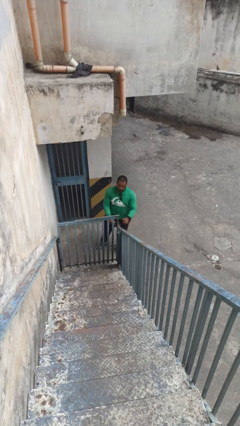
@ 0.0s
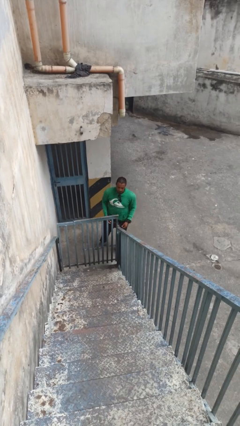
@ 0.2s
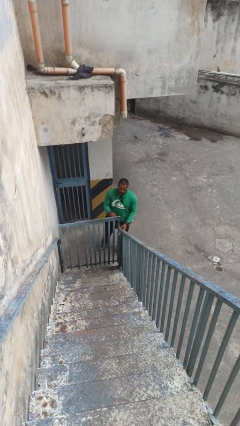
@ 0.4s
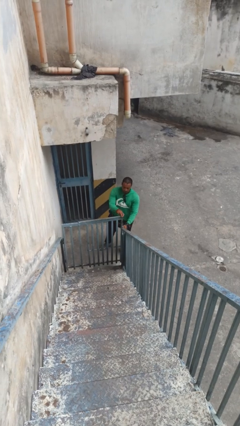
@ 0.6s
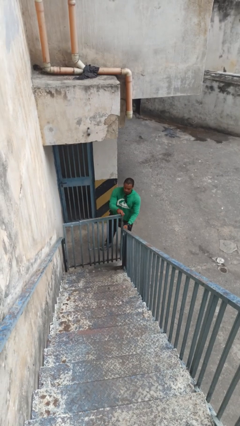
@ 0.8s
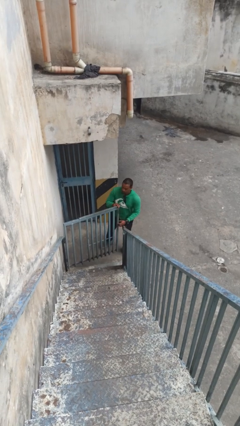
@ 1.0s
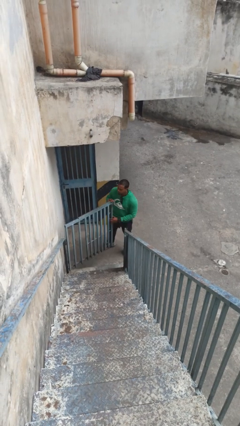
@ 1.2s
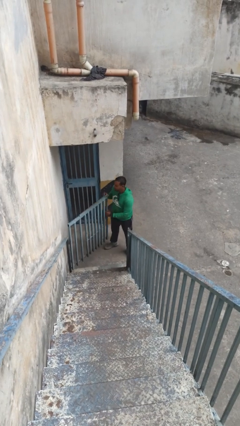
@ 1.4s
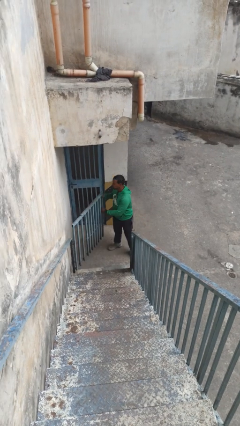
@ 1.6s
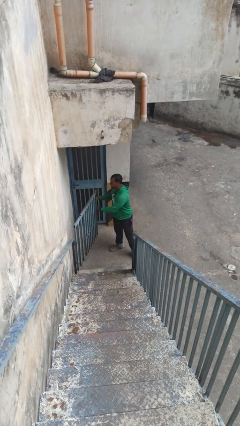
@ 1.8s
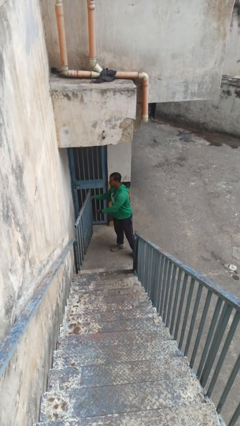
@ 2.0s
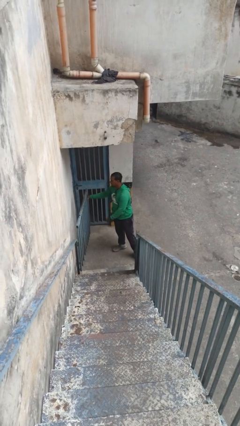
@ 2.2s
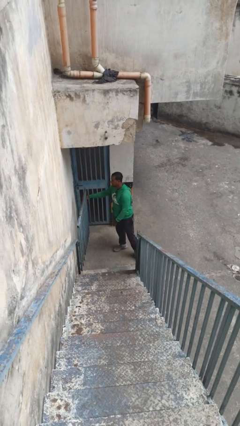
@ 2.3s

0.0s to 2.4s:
person opens facility door

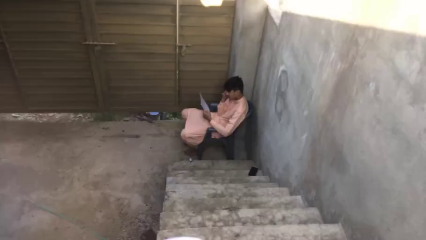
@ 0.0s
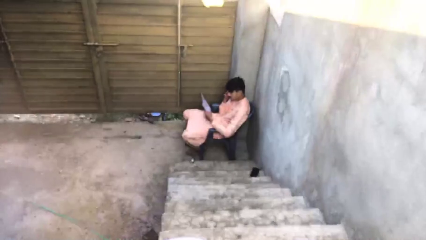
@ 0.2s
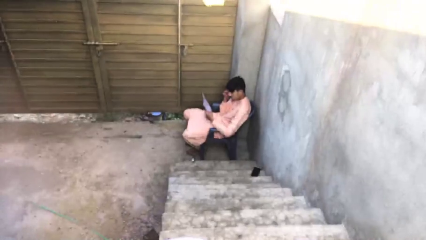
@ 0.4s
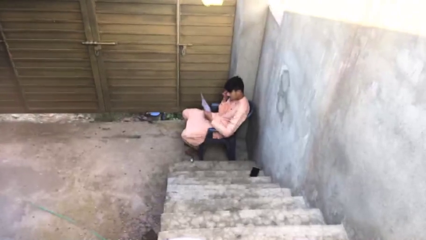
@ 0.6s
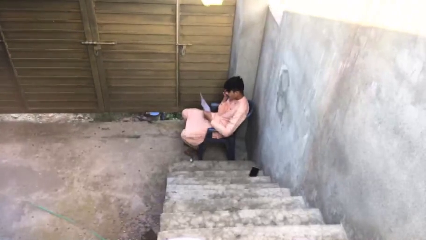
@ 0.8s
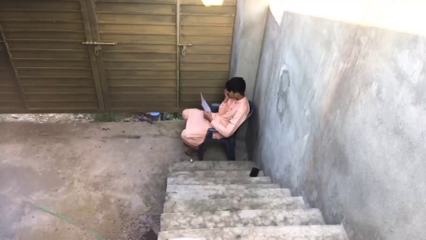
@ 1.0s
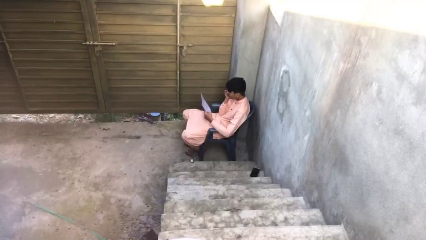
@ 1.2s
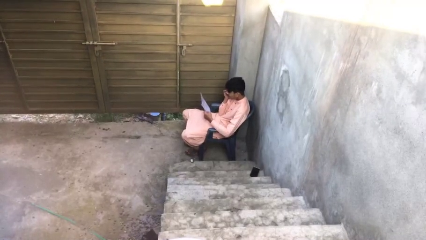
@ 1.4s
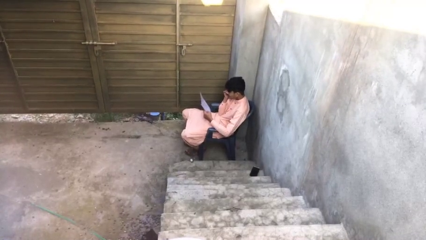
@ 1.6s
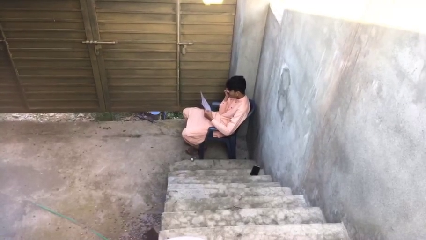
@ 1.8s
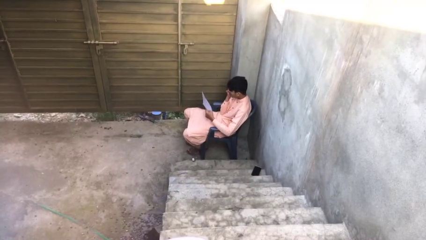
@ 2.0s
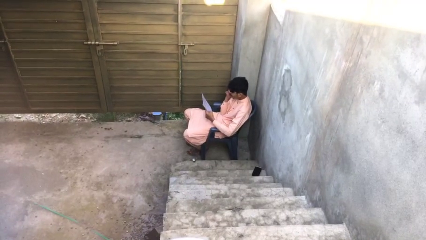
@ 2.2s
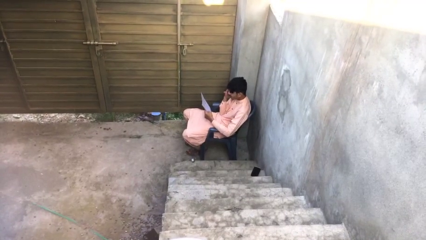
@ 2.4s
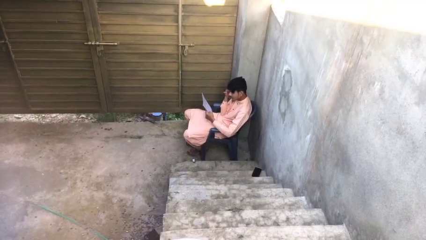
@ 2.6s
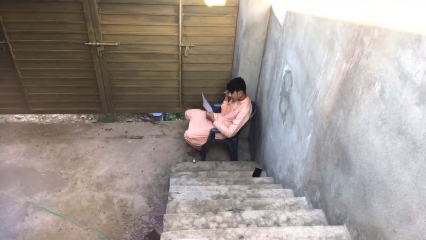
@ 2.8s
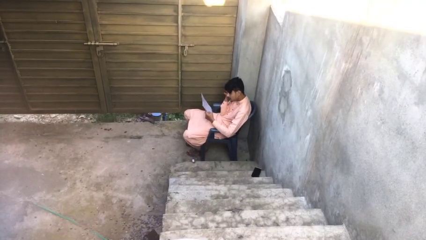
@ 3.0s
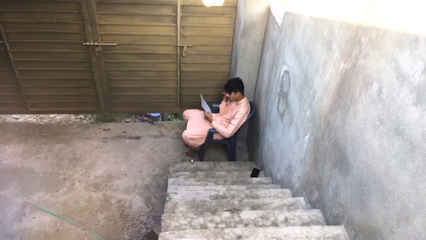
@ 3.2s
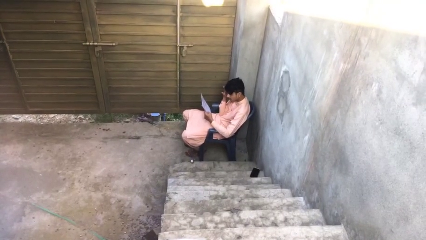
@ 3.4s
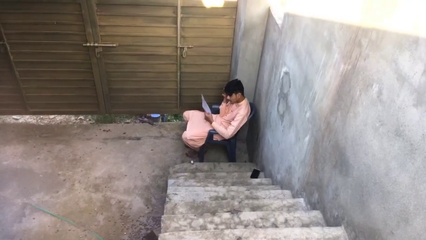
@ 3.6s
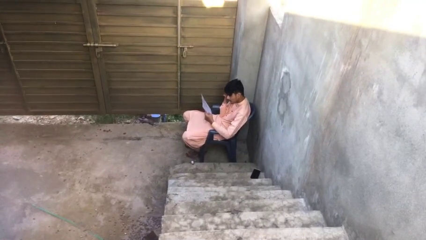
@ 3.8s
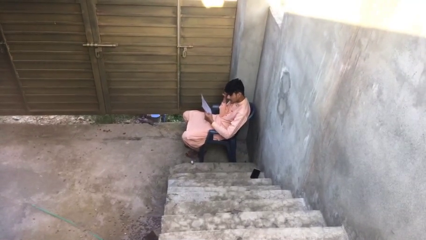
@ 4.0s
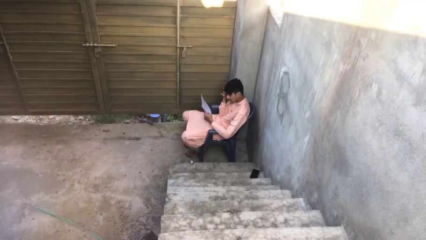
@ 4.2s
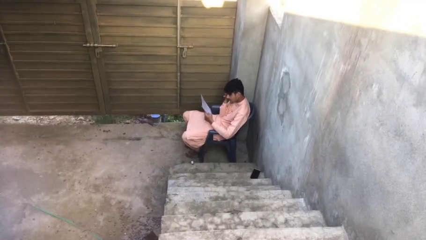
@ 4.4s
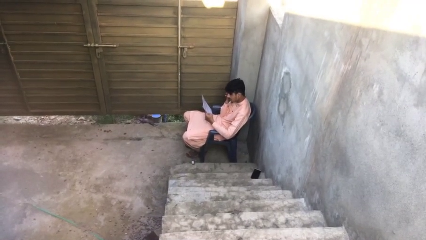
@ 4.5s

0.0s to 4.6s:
person reads document

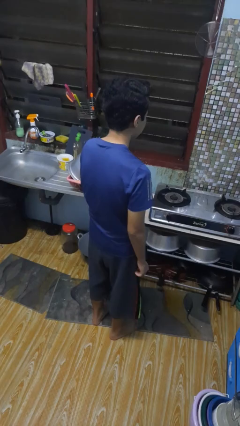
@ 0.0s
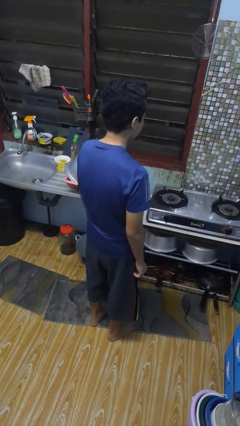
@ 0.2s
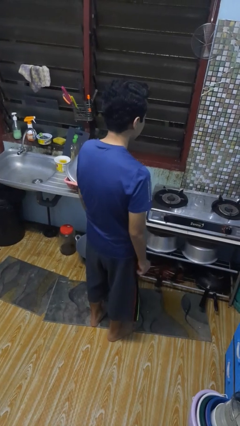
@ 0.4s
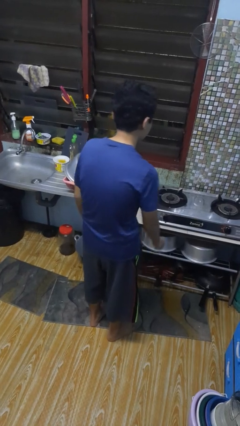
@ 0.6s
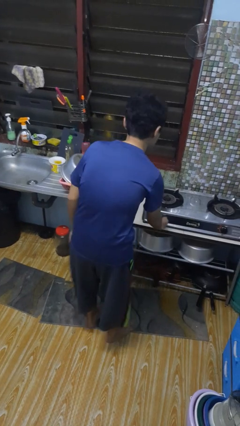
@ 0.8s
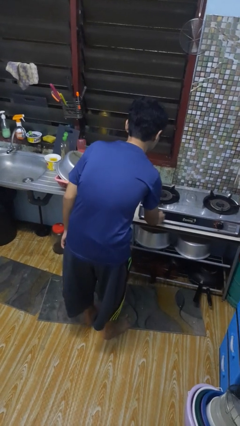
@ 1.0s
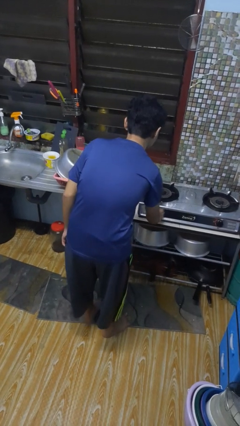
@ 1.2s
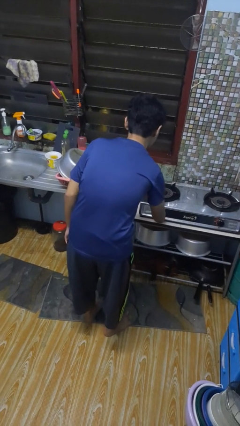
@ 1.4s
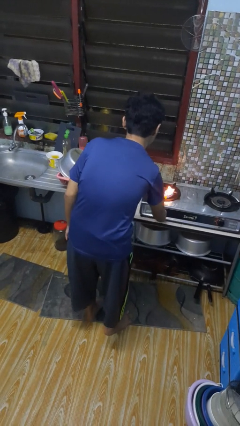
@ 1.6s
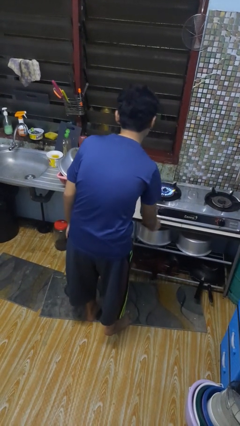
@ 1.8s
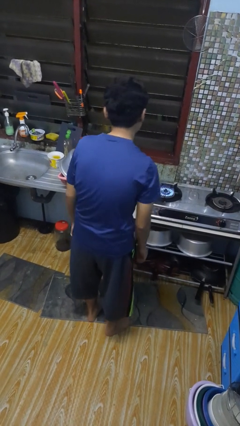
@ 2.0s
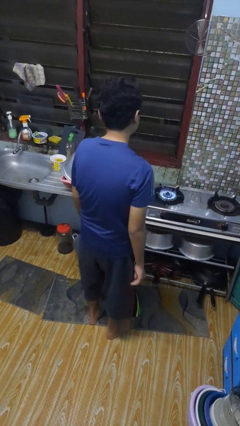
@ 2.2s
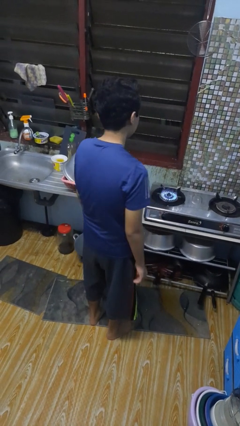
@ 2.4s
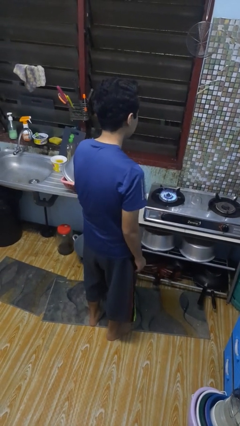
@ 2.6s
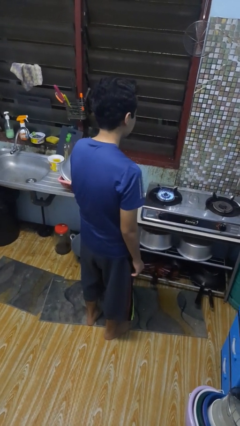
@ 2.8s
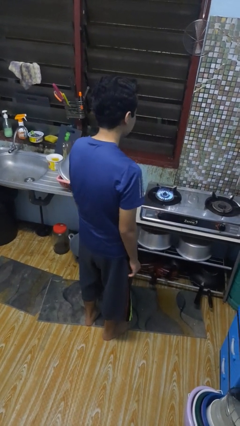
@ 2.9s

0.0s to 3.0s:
person turns on stovetop

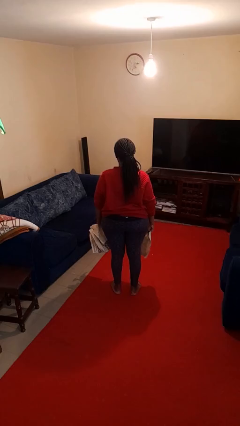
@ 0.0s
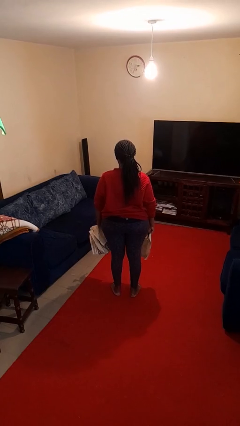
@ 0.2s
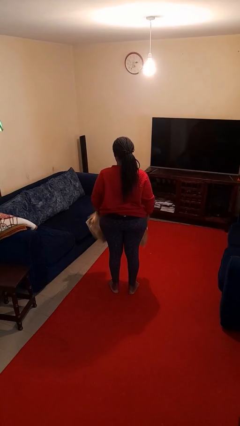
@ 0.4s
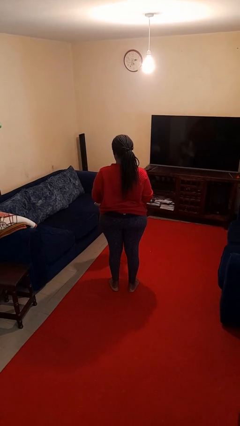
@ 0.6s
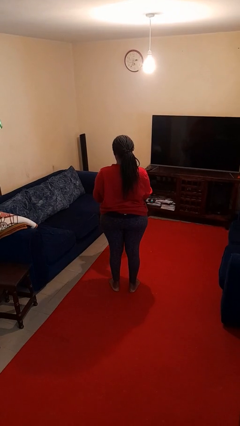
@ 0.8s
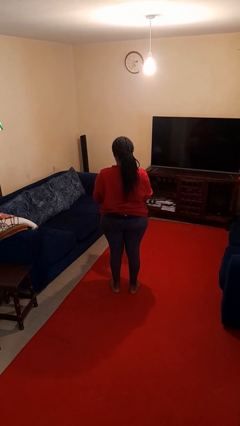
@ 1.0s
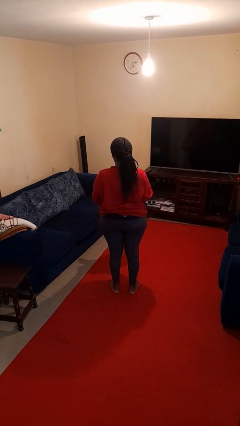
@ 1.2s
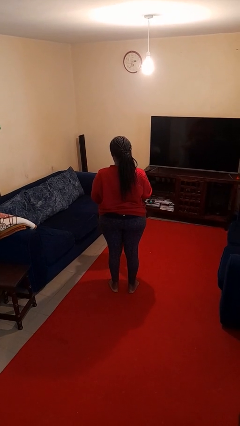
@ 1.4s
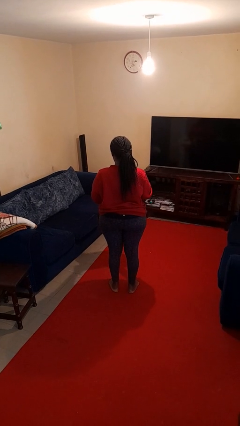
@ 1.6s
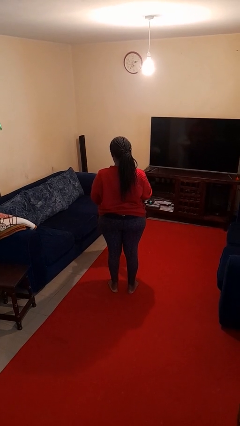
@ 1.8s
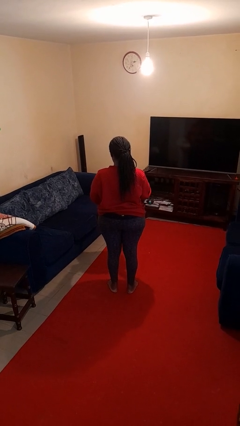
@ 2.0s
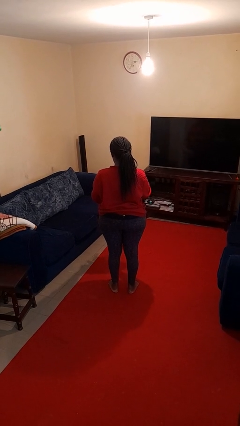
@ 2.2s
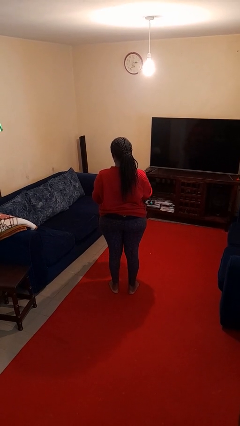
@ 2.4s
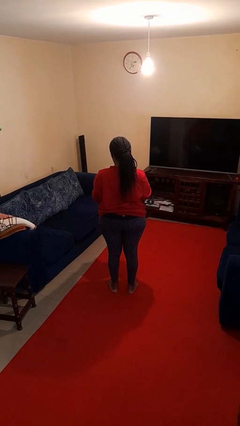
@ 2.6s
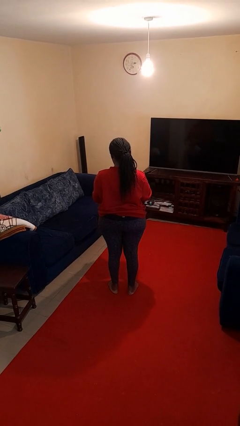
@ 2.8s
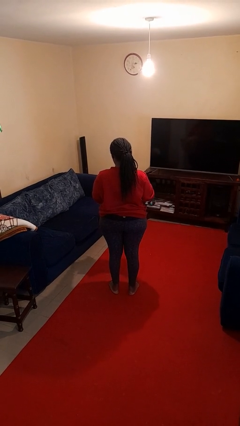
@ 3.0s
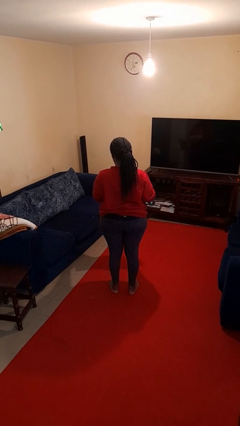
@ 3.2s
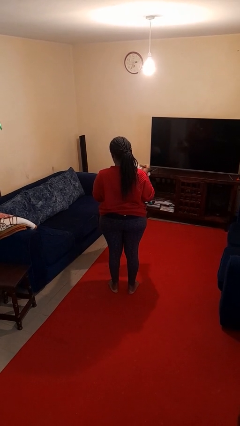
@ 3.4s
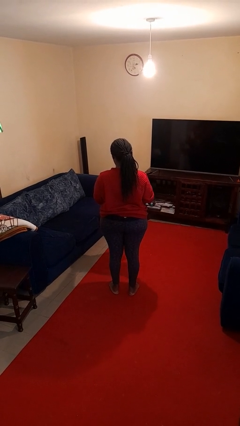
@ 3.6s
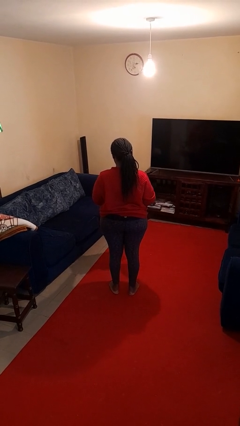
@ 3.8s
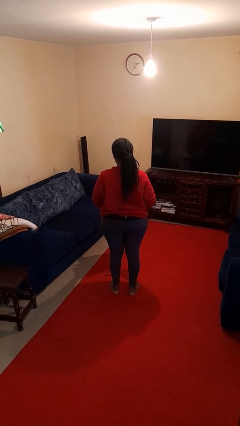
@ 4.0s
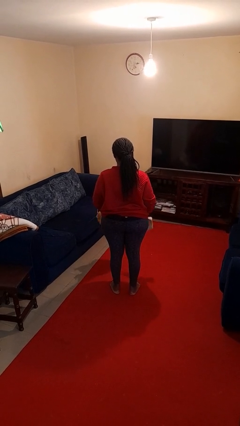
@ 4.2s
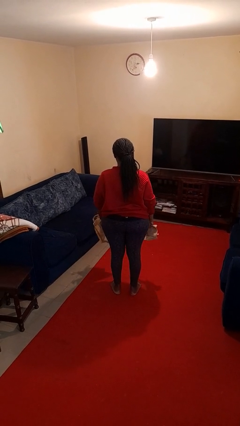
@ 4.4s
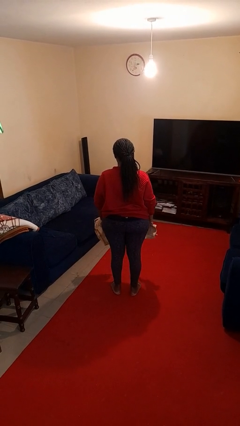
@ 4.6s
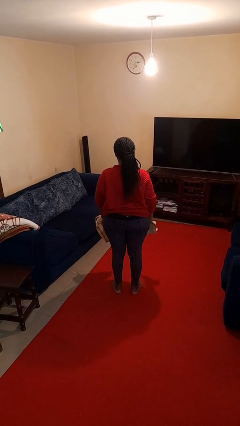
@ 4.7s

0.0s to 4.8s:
person tears paper

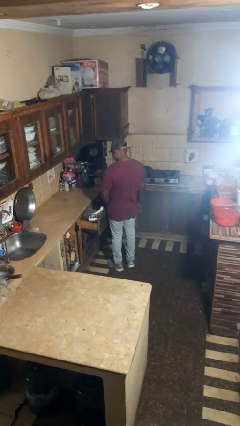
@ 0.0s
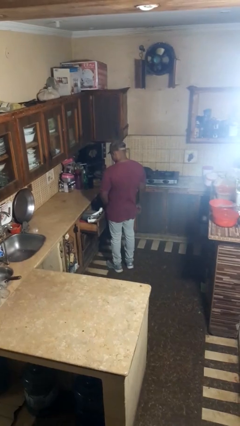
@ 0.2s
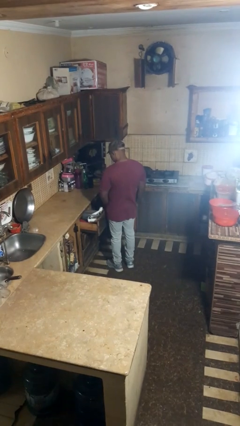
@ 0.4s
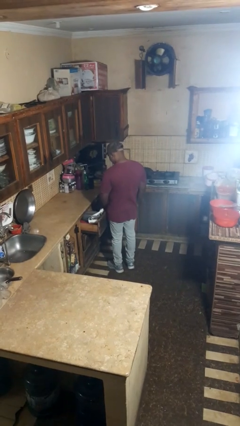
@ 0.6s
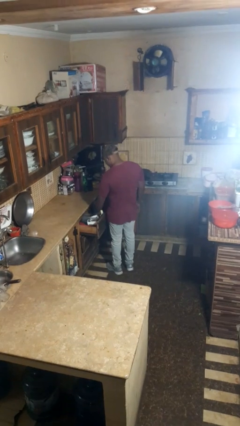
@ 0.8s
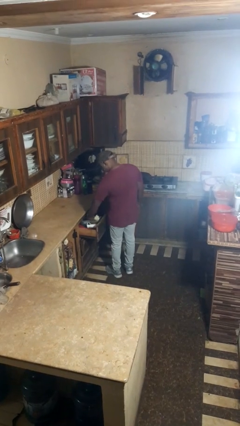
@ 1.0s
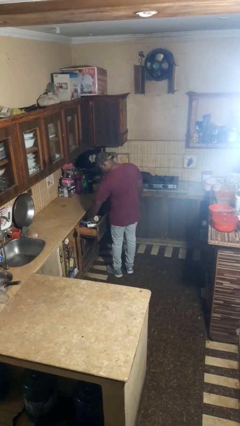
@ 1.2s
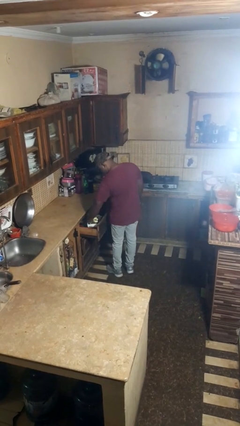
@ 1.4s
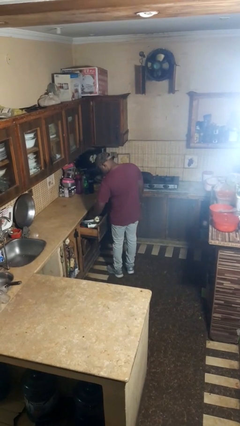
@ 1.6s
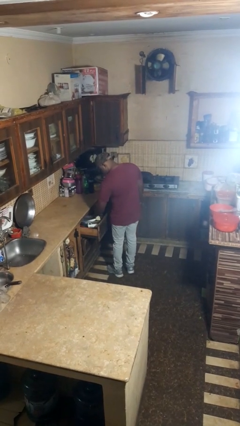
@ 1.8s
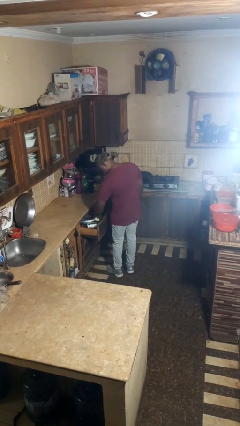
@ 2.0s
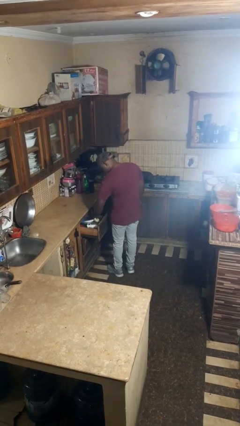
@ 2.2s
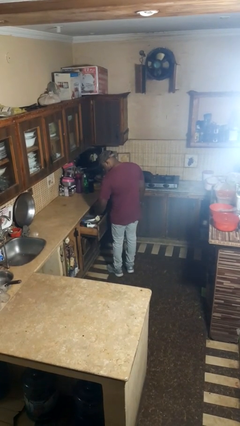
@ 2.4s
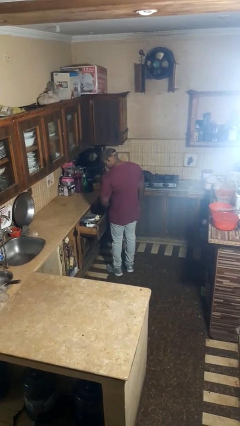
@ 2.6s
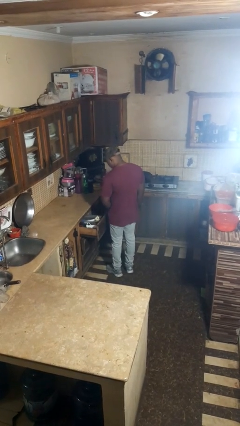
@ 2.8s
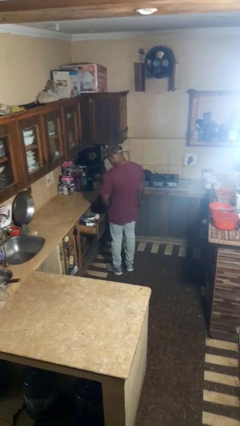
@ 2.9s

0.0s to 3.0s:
person searches in kitchen drawer
